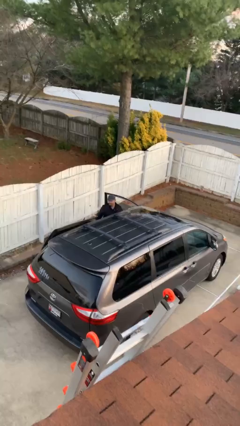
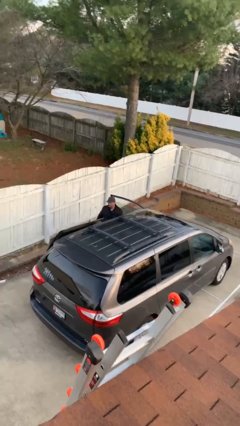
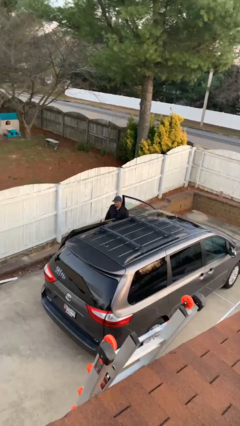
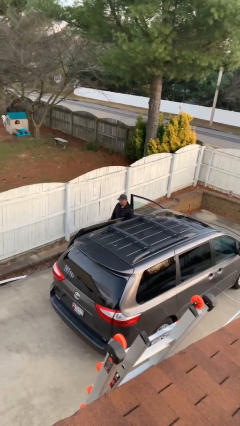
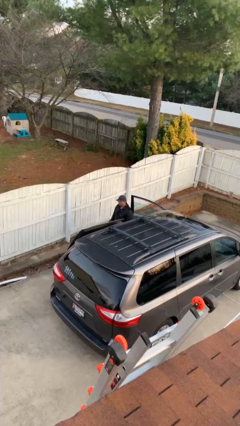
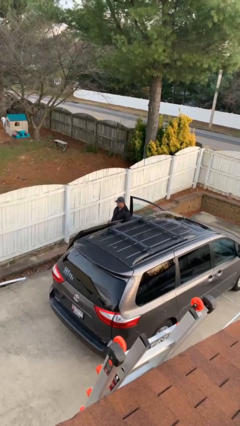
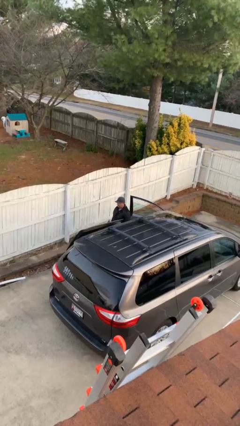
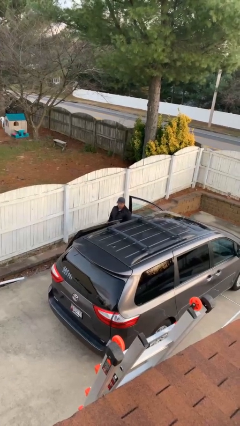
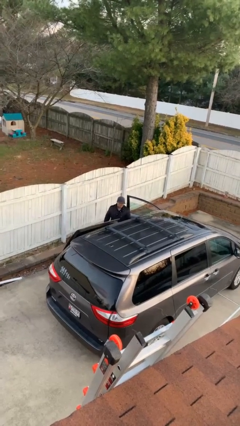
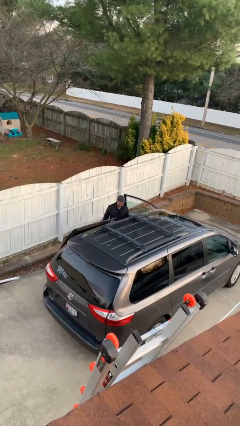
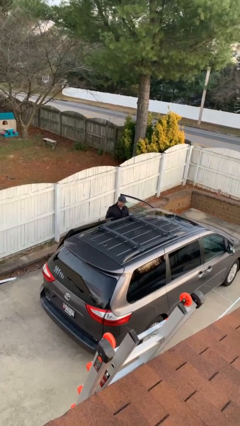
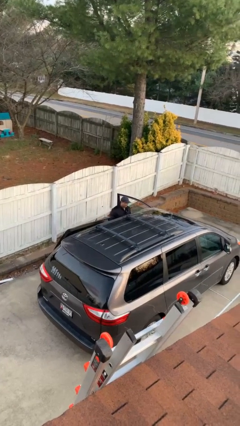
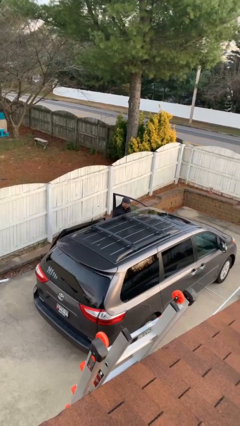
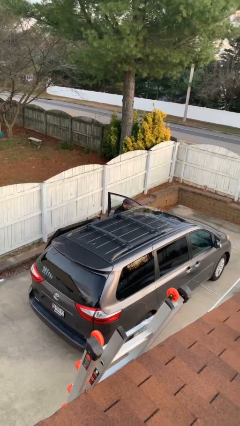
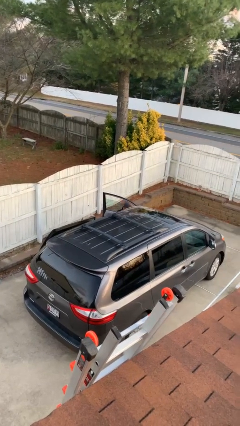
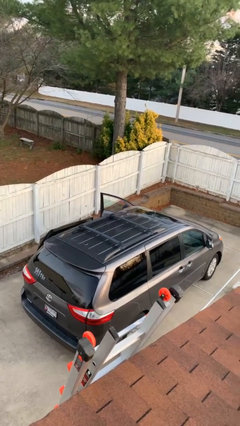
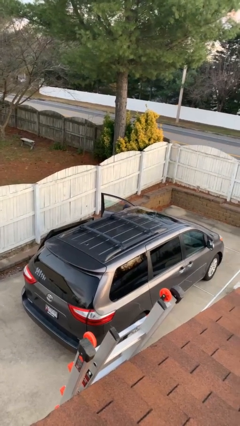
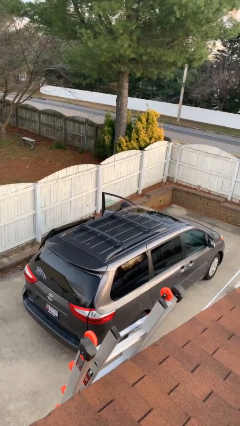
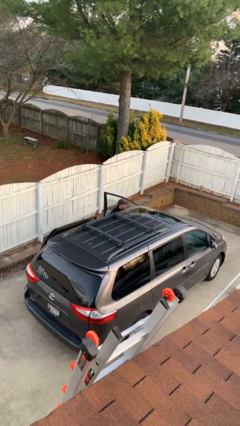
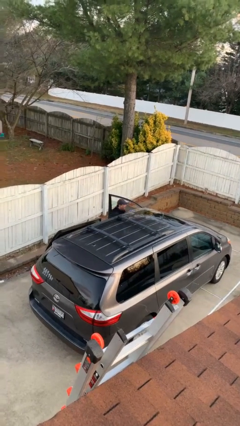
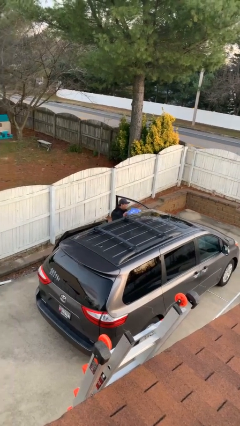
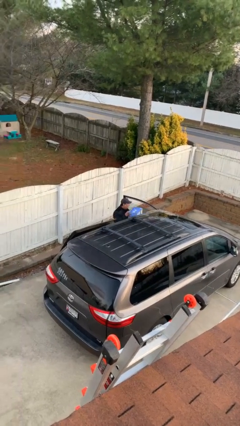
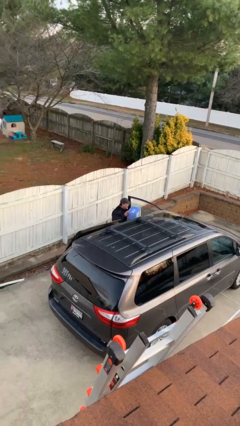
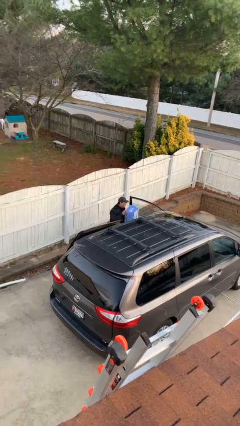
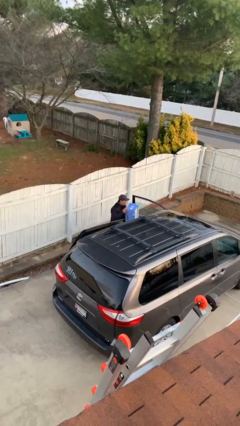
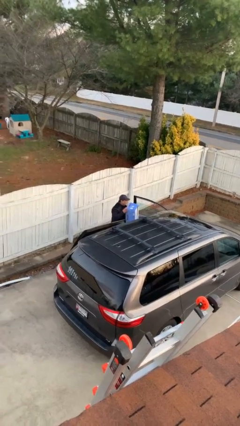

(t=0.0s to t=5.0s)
person unloads car

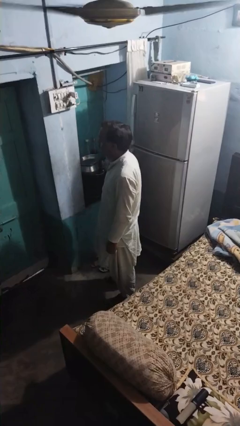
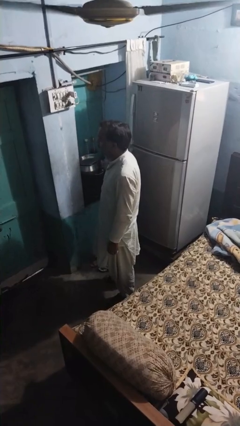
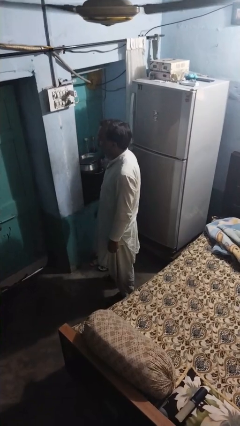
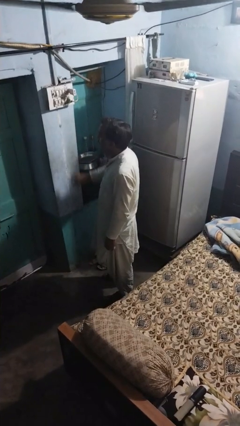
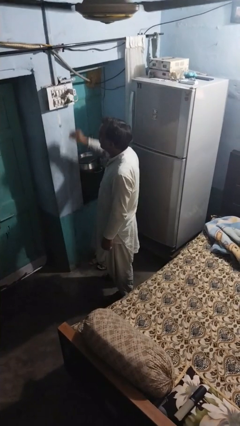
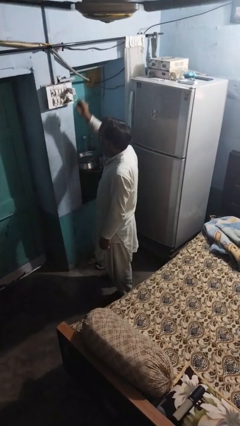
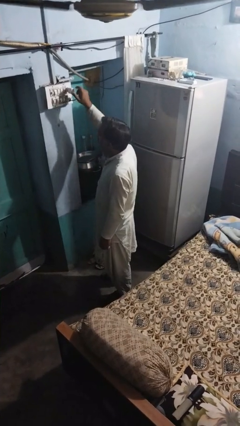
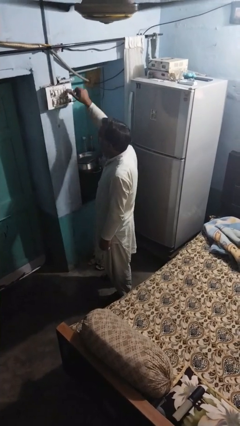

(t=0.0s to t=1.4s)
person unplugs from electrical socket

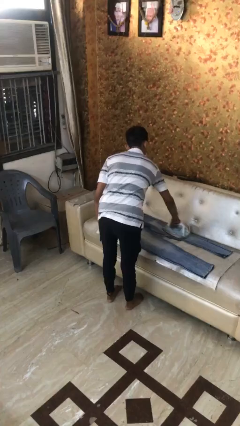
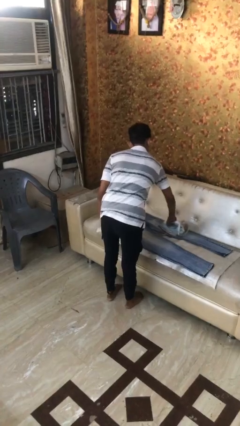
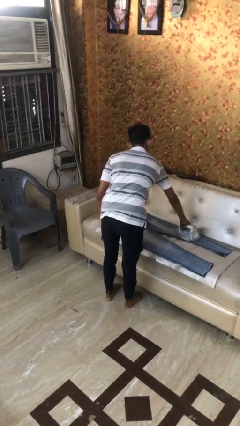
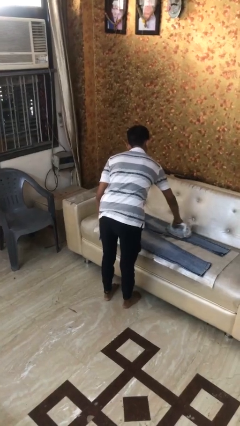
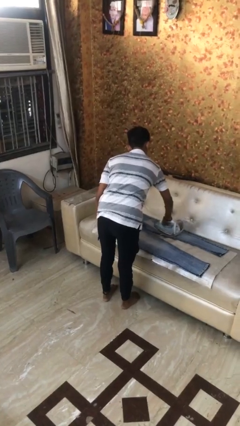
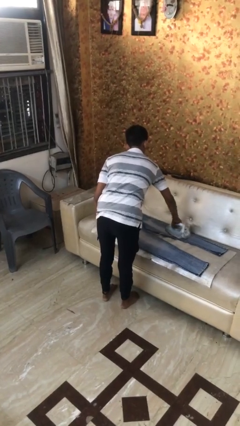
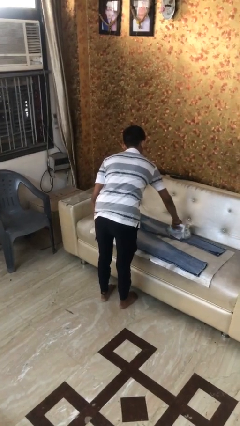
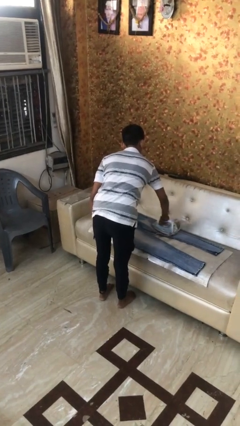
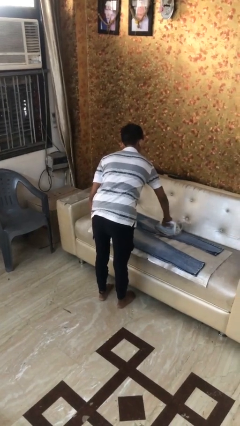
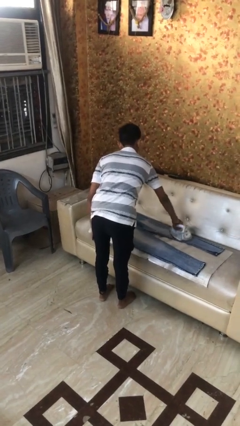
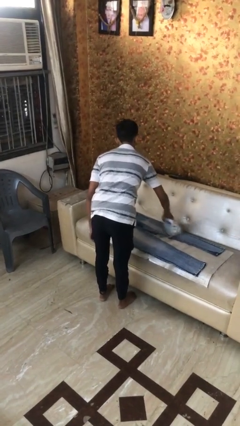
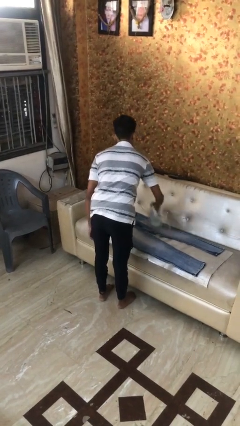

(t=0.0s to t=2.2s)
person irons clothes

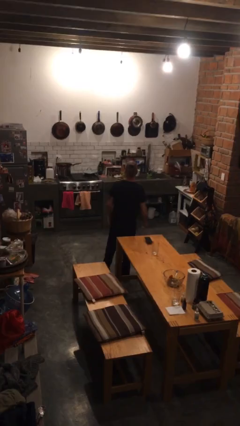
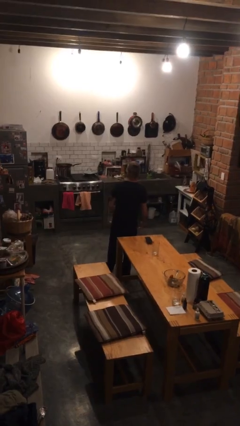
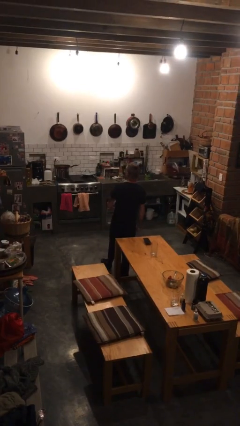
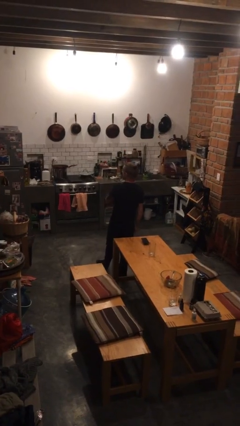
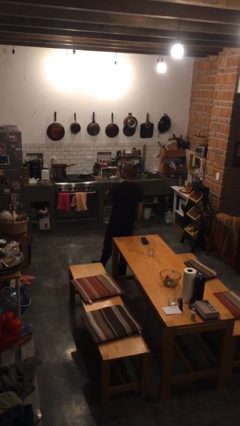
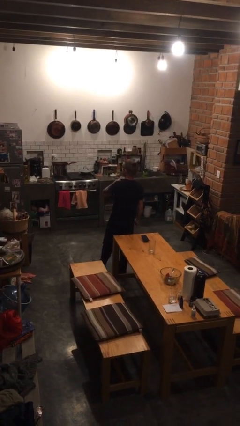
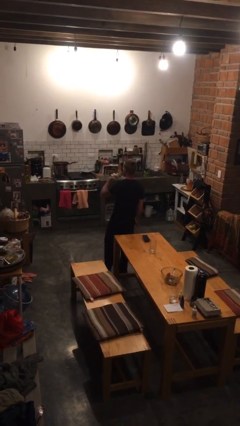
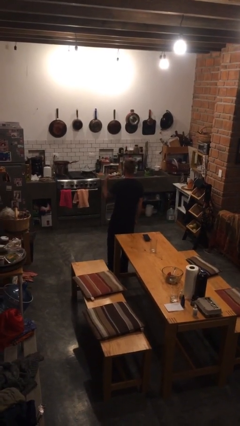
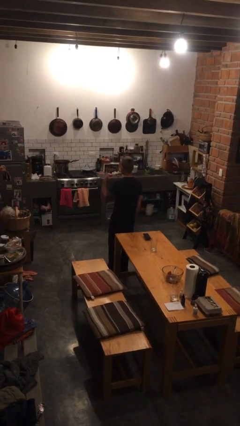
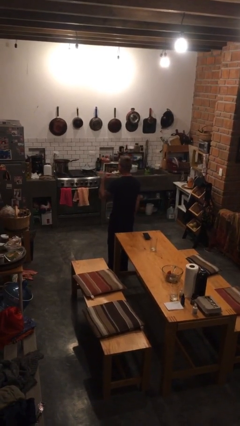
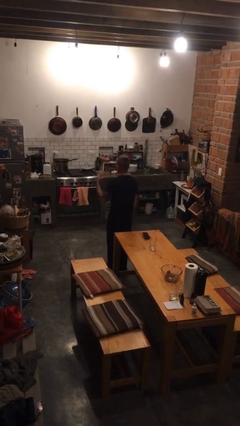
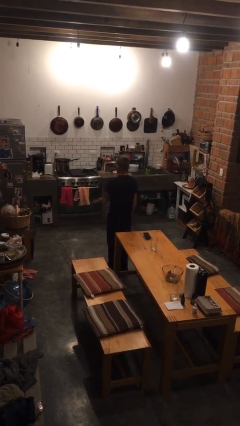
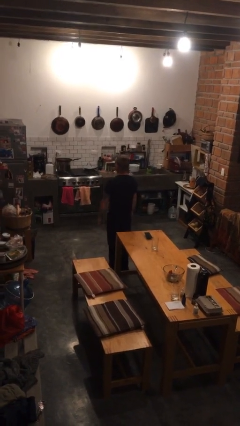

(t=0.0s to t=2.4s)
person gestures cut

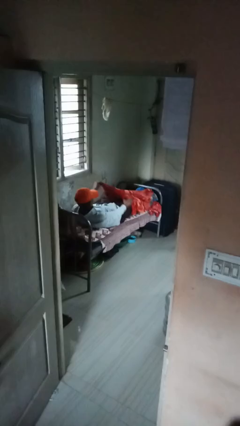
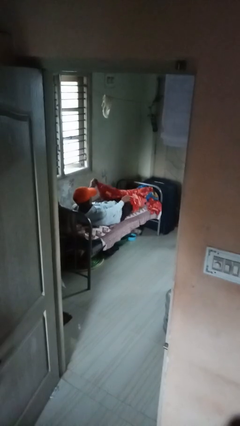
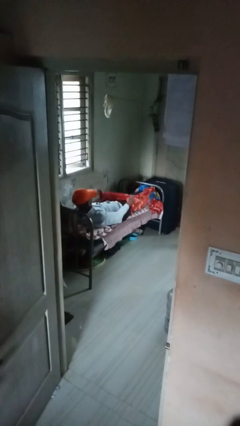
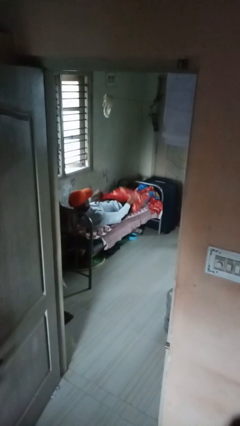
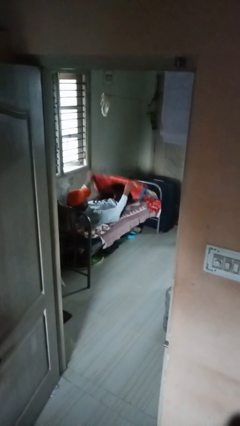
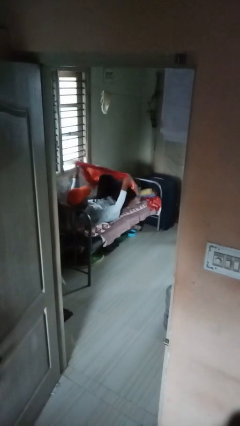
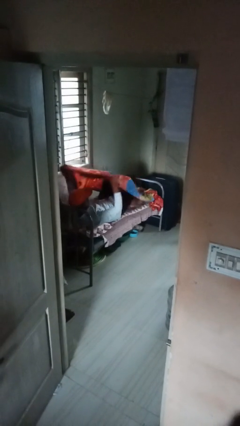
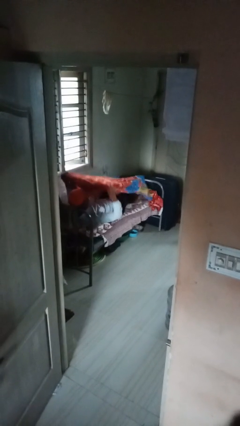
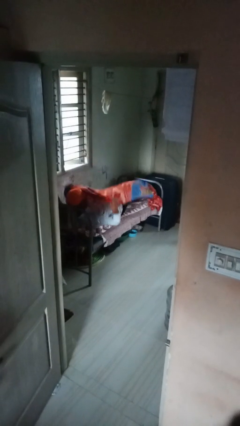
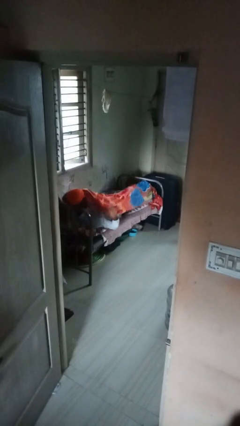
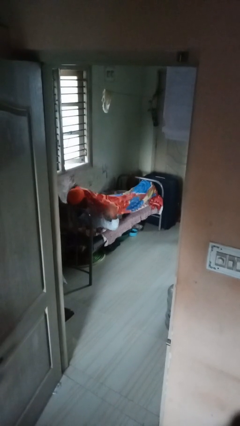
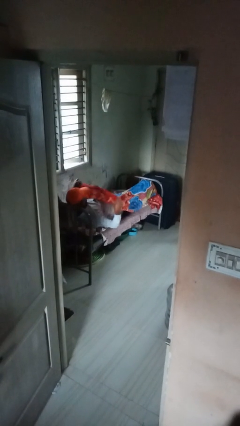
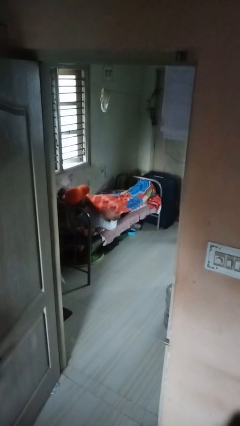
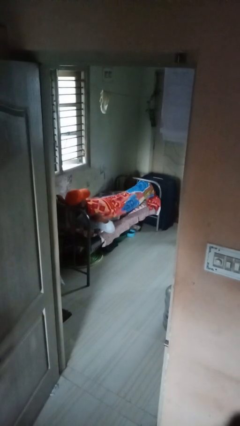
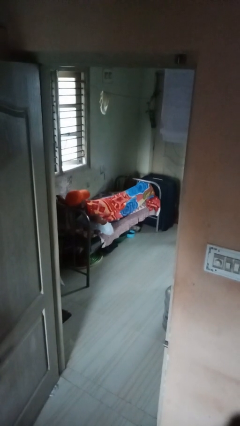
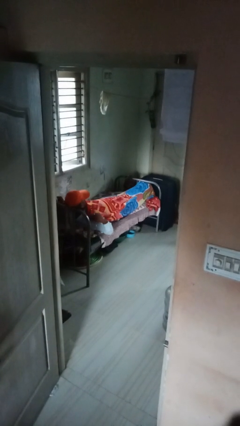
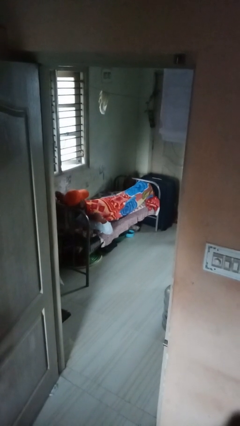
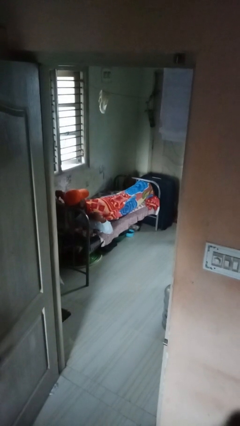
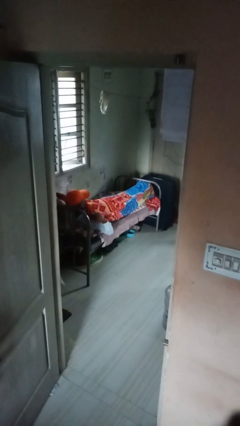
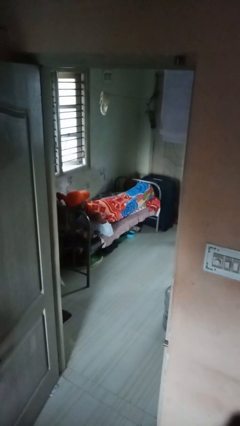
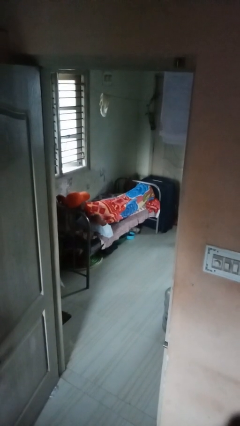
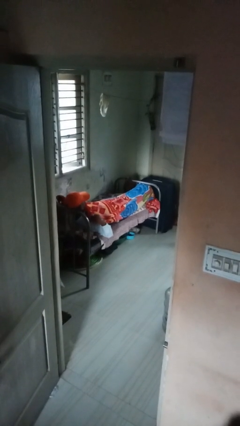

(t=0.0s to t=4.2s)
person covers with bedsheets

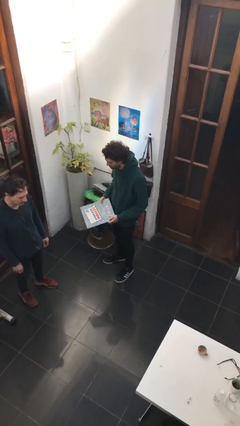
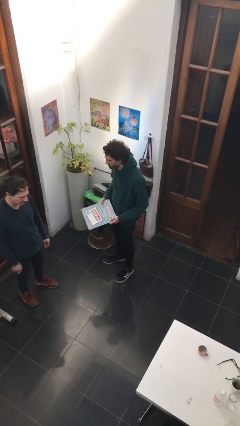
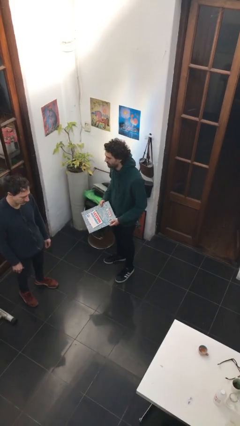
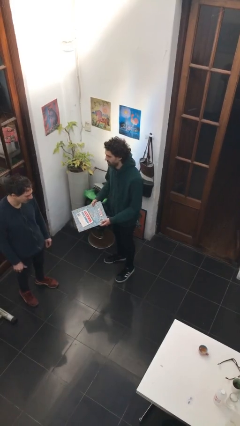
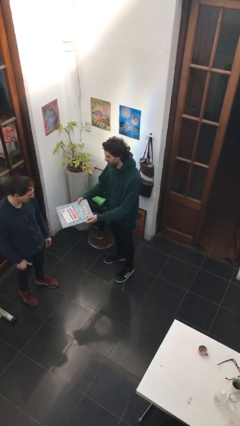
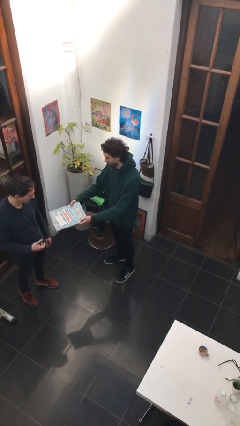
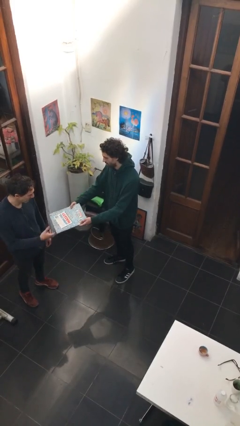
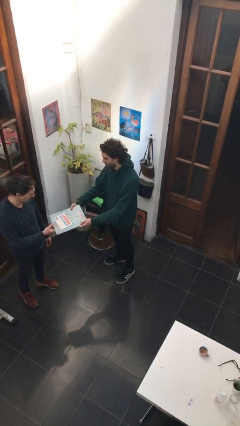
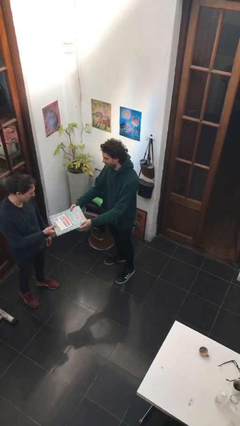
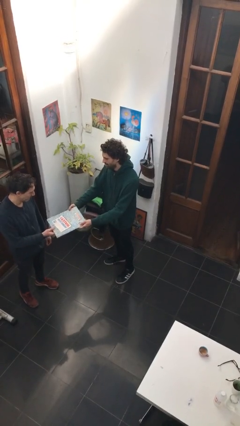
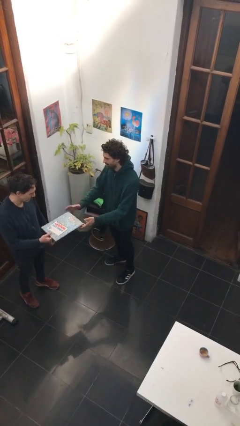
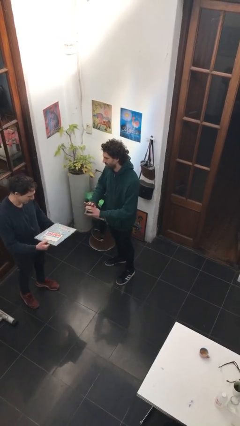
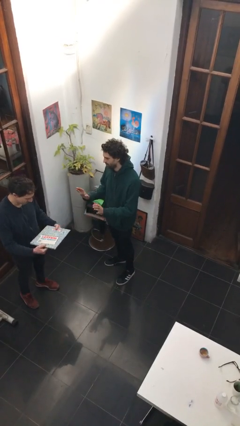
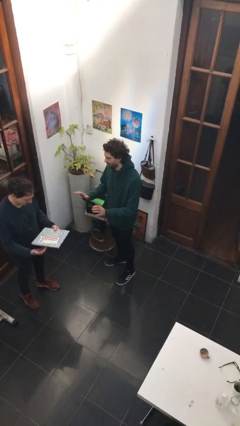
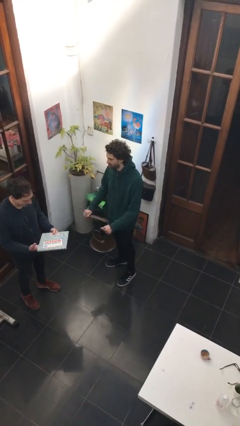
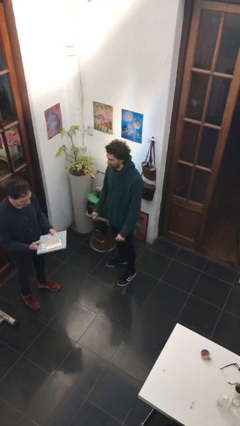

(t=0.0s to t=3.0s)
person transfers object to person
